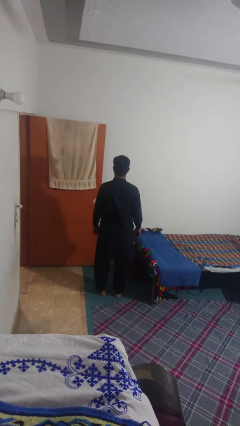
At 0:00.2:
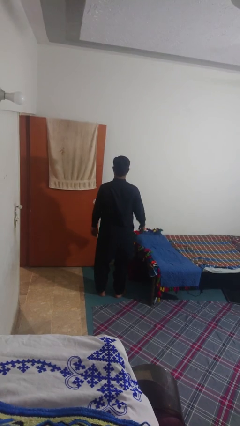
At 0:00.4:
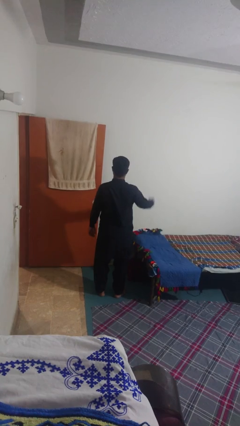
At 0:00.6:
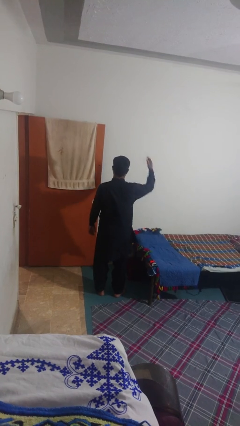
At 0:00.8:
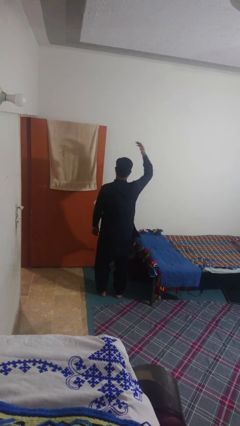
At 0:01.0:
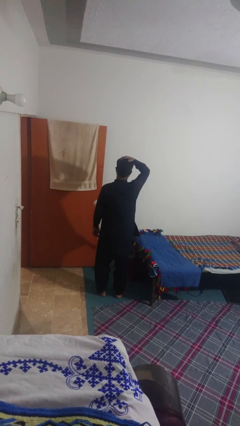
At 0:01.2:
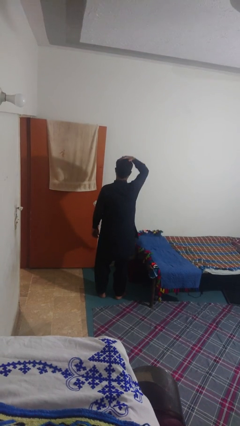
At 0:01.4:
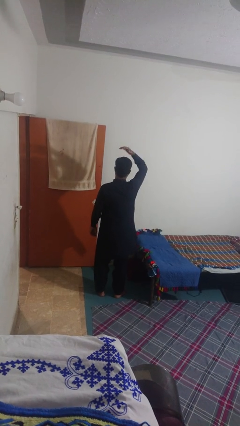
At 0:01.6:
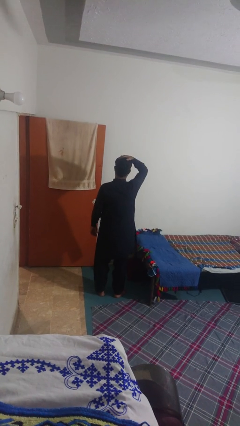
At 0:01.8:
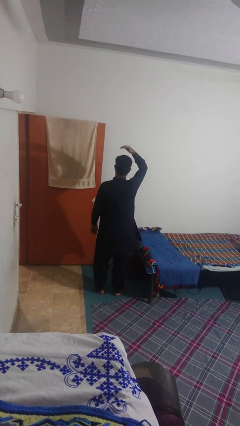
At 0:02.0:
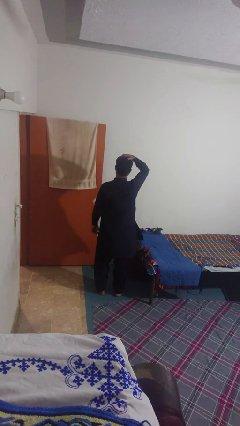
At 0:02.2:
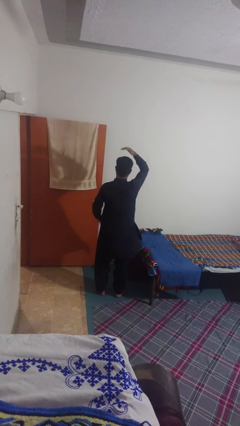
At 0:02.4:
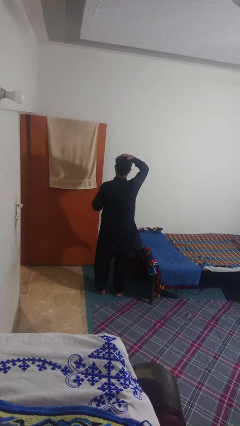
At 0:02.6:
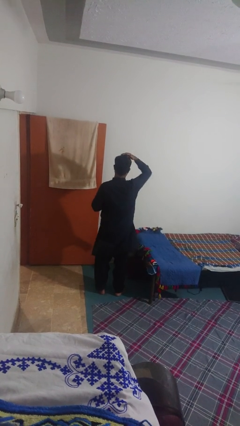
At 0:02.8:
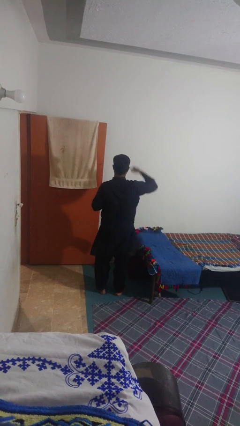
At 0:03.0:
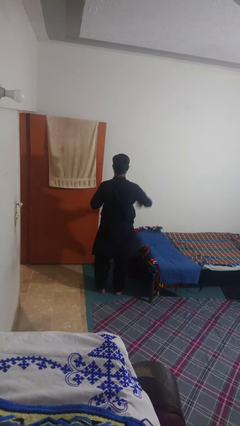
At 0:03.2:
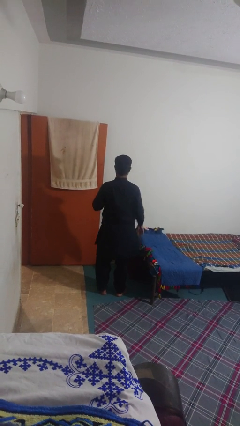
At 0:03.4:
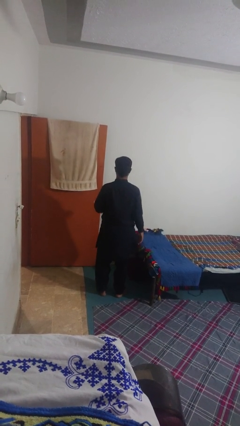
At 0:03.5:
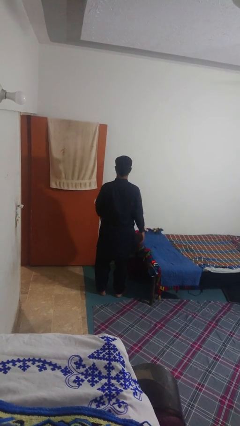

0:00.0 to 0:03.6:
person pats head

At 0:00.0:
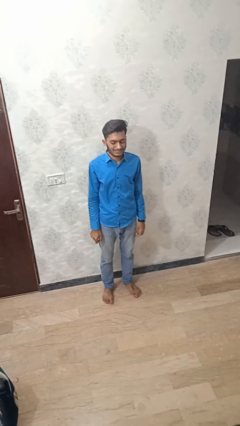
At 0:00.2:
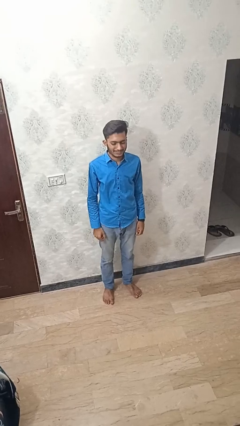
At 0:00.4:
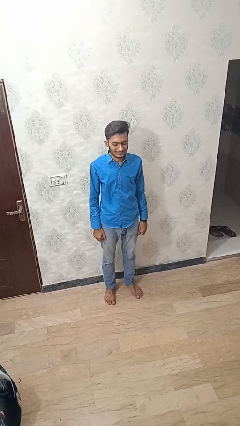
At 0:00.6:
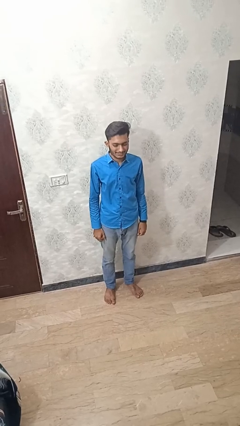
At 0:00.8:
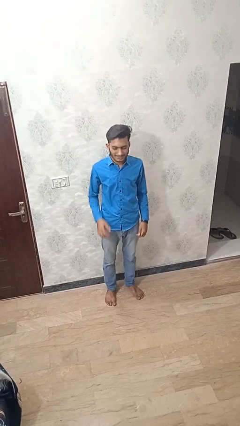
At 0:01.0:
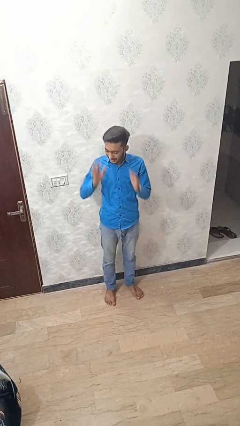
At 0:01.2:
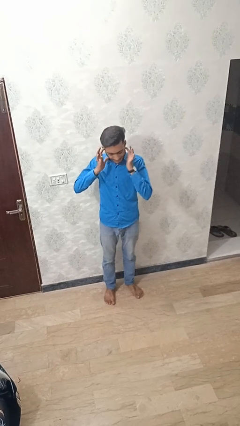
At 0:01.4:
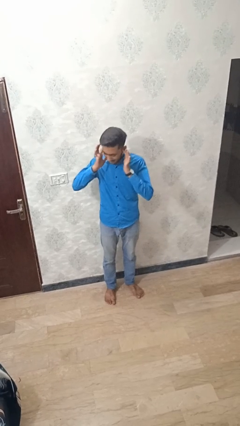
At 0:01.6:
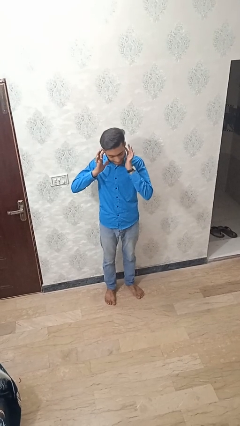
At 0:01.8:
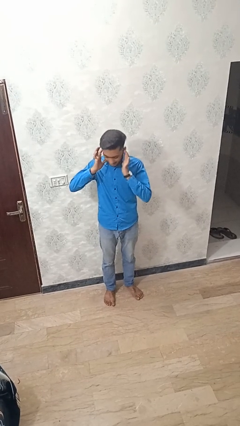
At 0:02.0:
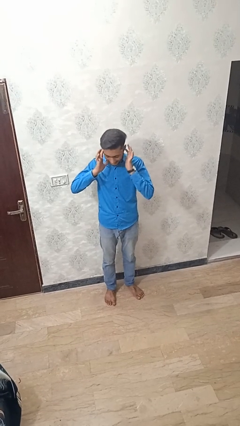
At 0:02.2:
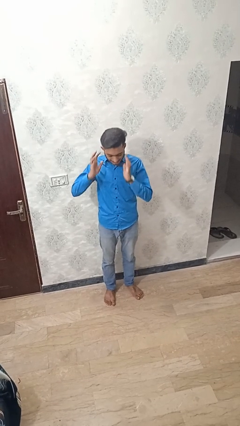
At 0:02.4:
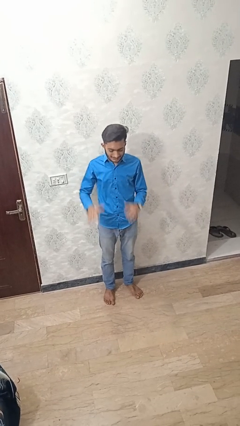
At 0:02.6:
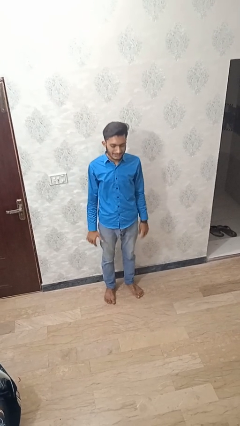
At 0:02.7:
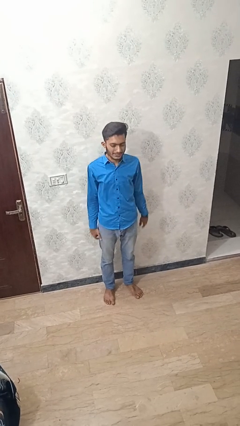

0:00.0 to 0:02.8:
person puts fingers in ear

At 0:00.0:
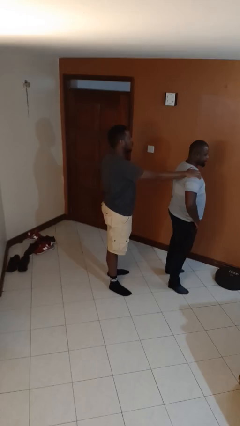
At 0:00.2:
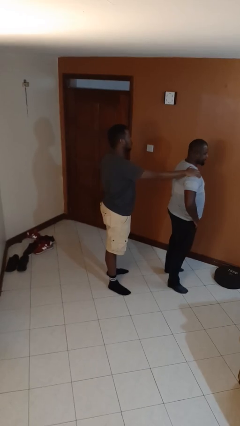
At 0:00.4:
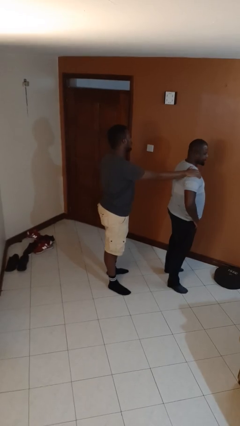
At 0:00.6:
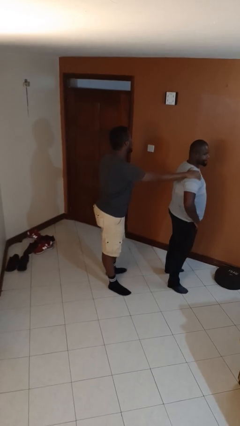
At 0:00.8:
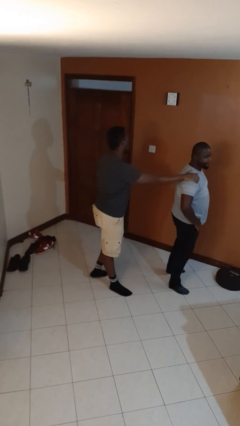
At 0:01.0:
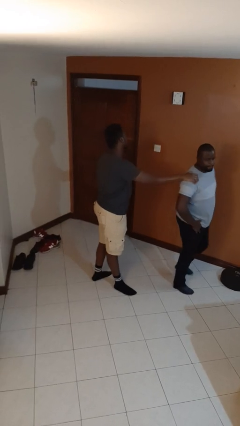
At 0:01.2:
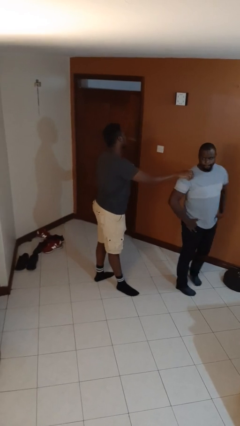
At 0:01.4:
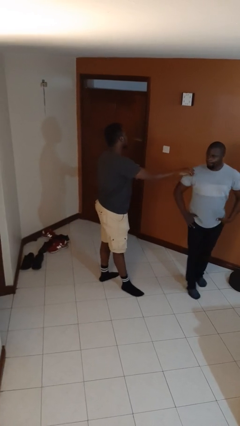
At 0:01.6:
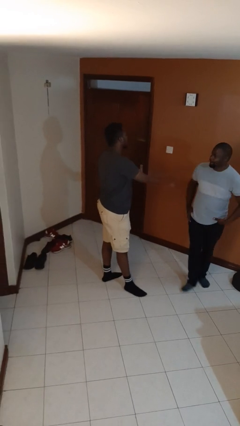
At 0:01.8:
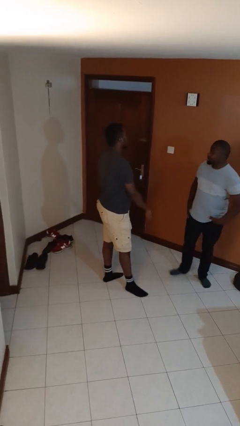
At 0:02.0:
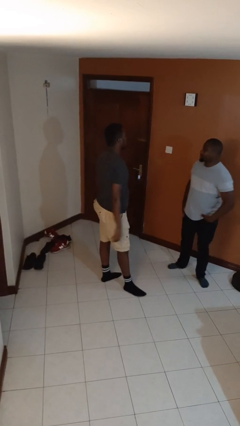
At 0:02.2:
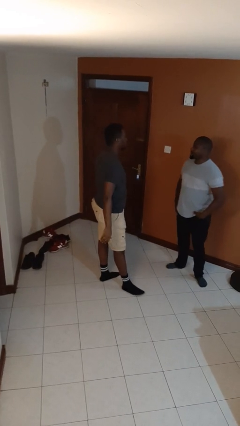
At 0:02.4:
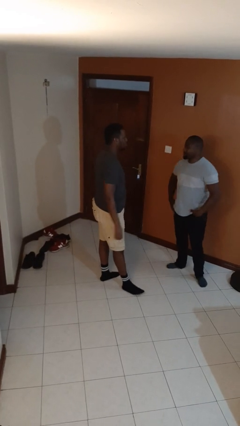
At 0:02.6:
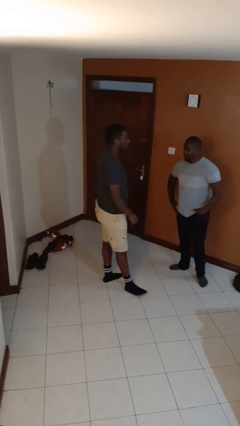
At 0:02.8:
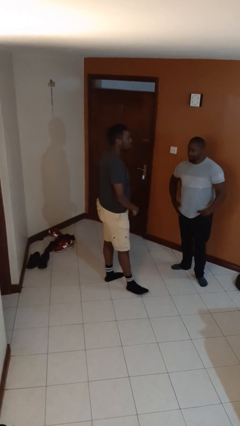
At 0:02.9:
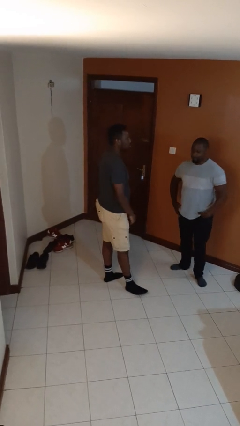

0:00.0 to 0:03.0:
person spins person around

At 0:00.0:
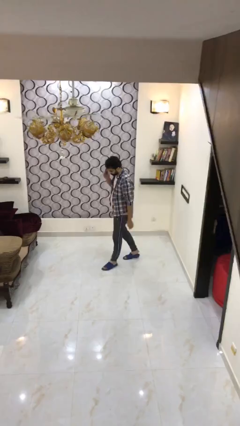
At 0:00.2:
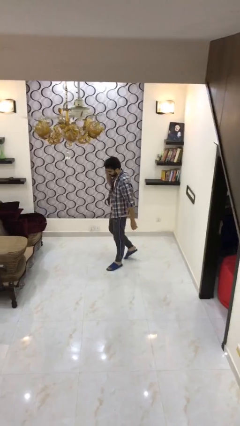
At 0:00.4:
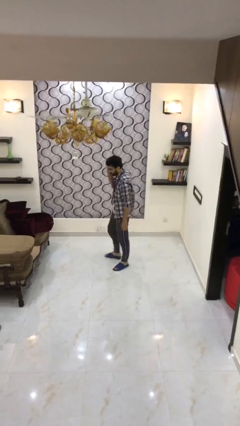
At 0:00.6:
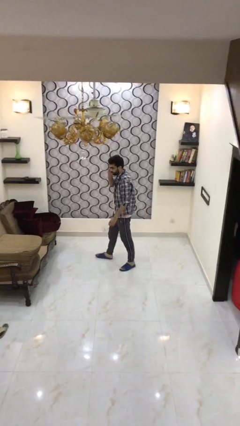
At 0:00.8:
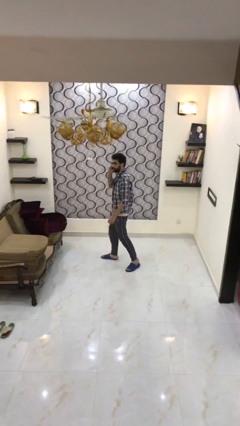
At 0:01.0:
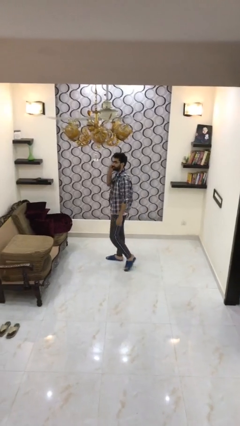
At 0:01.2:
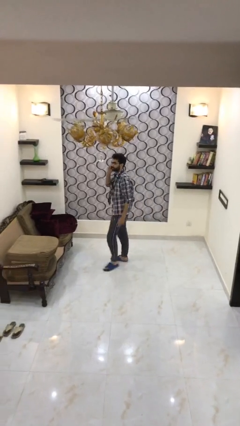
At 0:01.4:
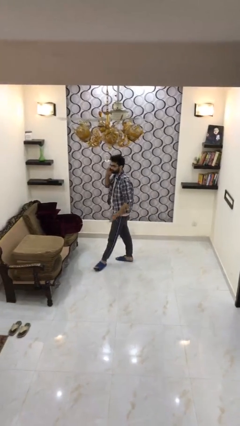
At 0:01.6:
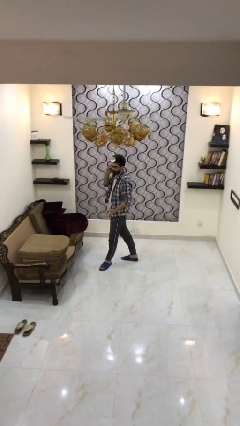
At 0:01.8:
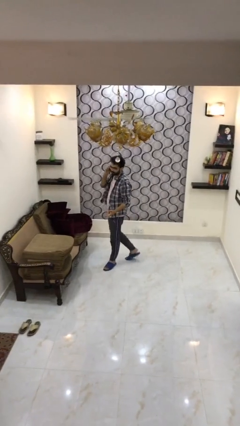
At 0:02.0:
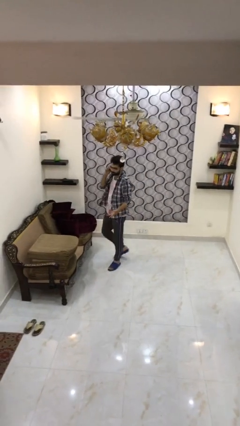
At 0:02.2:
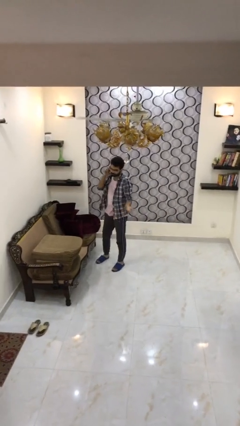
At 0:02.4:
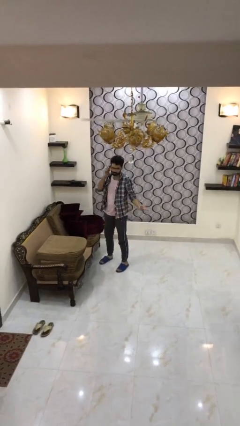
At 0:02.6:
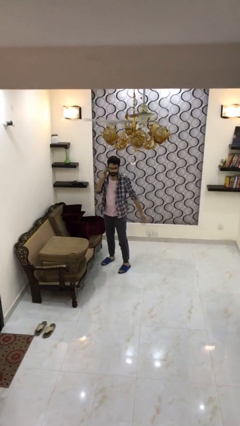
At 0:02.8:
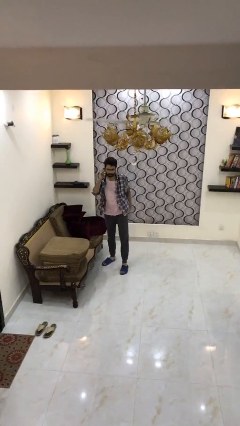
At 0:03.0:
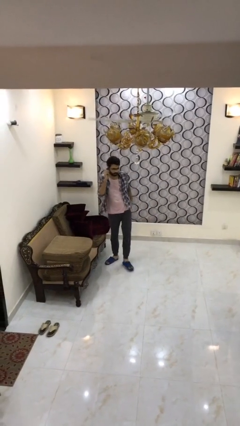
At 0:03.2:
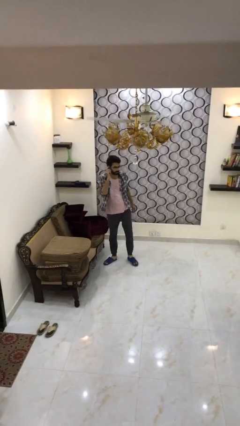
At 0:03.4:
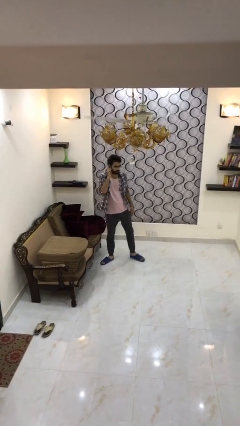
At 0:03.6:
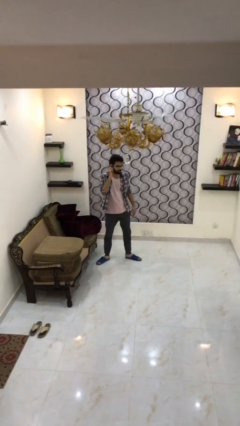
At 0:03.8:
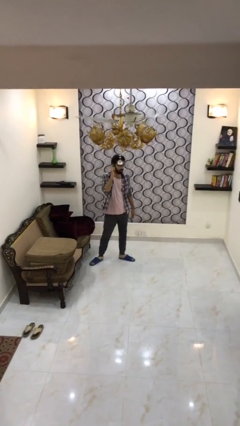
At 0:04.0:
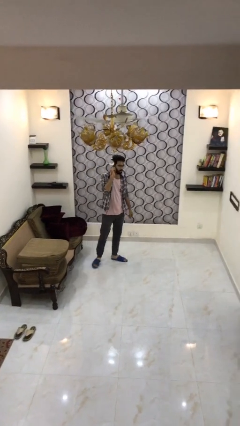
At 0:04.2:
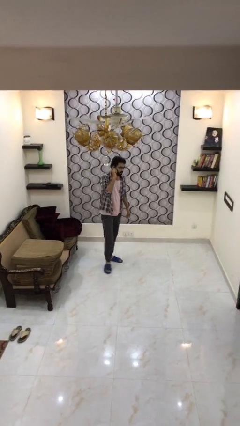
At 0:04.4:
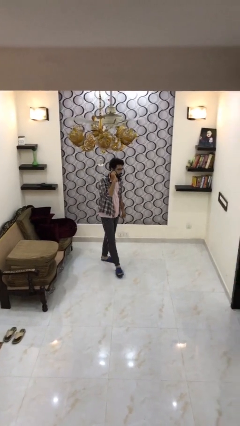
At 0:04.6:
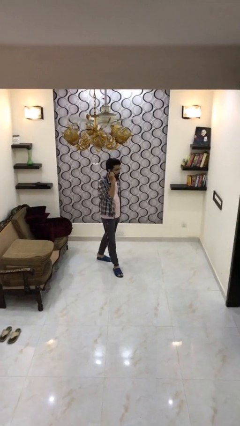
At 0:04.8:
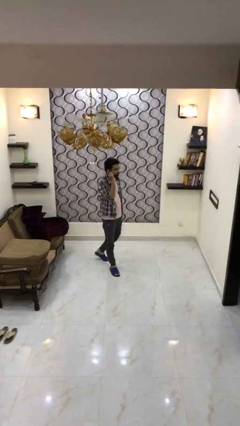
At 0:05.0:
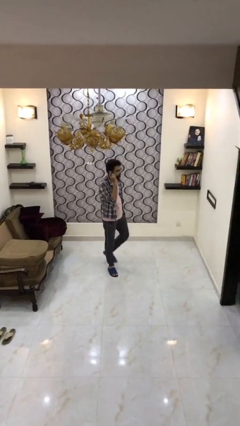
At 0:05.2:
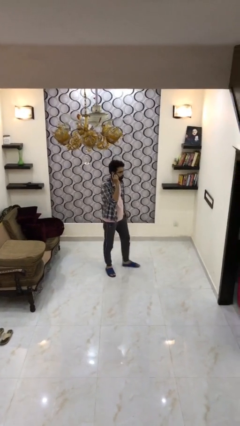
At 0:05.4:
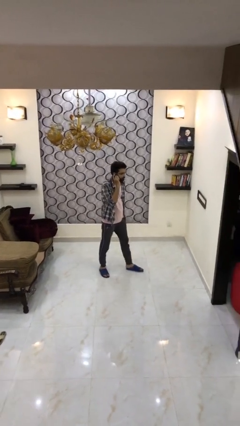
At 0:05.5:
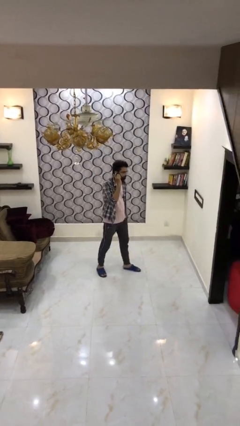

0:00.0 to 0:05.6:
person talks on phone

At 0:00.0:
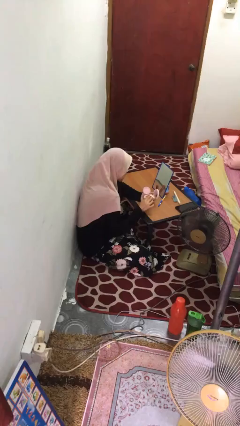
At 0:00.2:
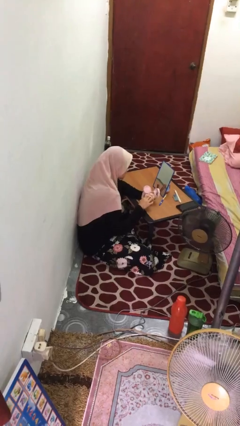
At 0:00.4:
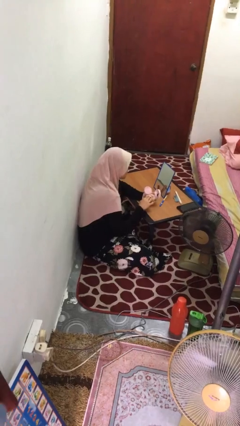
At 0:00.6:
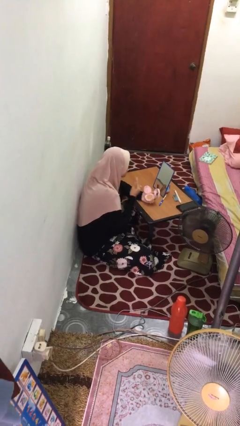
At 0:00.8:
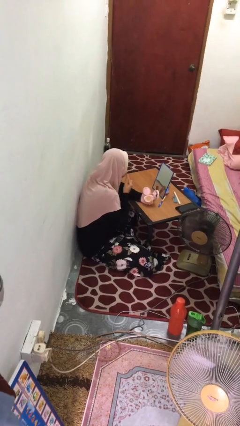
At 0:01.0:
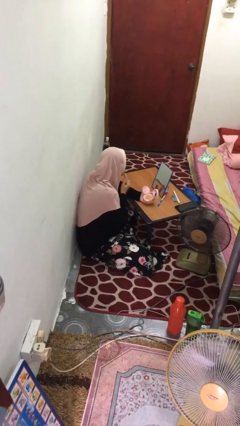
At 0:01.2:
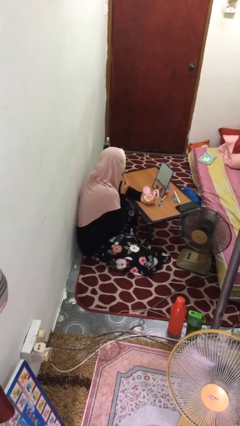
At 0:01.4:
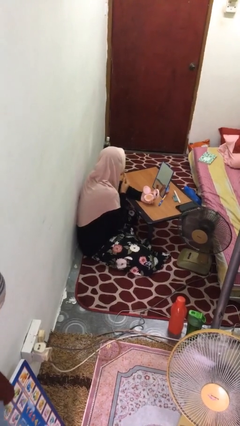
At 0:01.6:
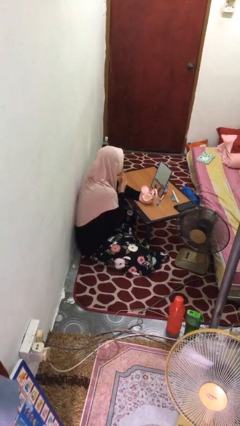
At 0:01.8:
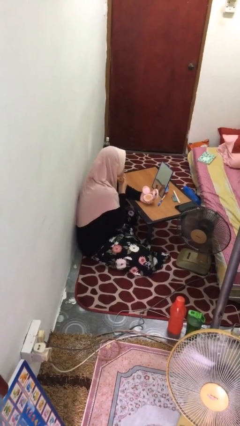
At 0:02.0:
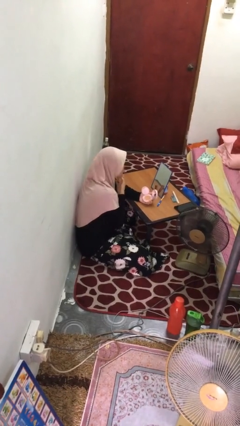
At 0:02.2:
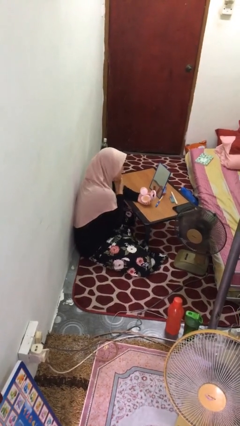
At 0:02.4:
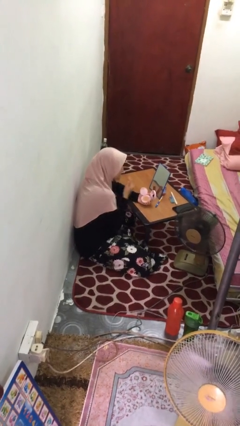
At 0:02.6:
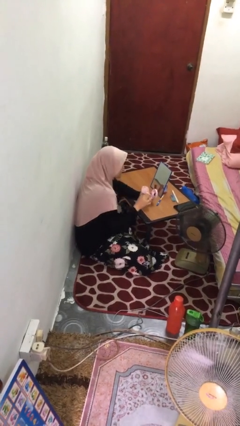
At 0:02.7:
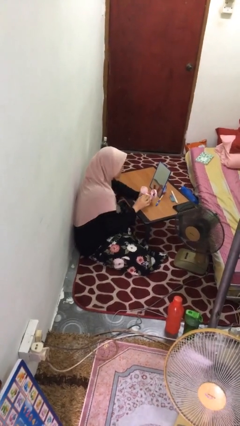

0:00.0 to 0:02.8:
person applies foundation makeup
